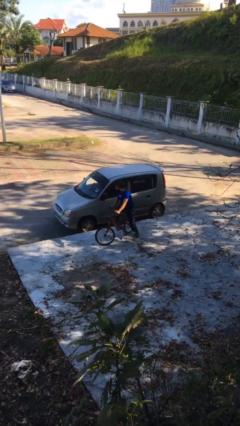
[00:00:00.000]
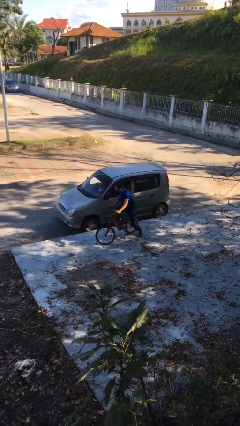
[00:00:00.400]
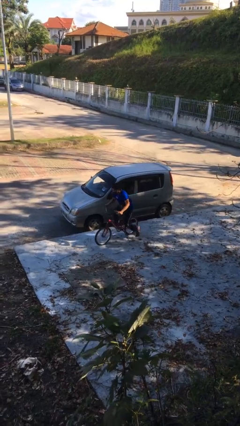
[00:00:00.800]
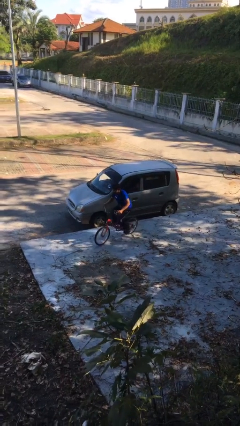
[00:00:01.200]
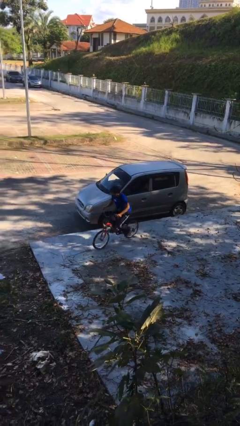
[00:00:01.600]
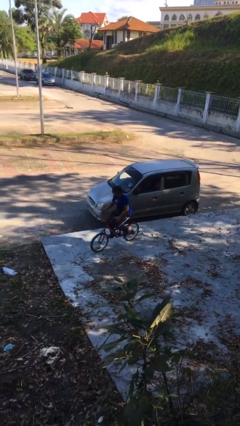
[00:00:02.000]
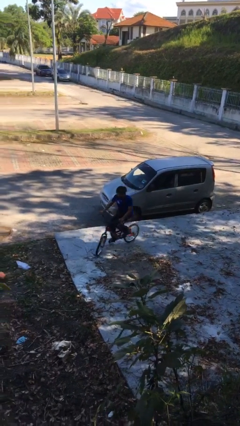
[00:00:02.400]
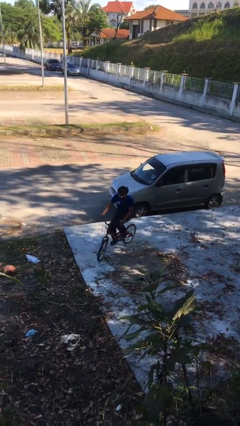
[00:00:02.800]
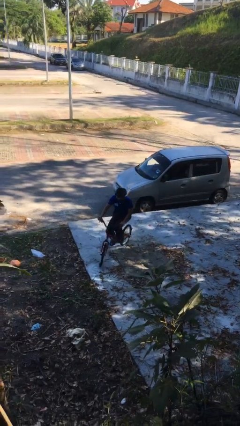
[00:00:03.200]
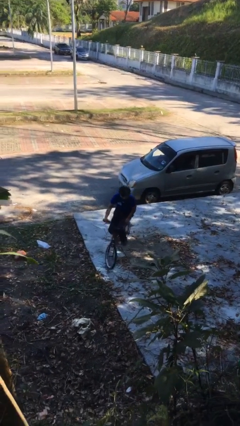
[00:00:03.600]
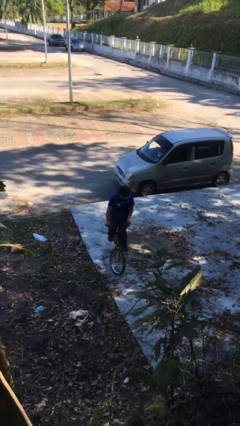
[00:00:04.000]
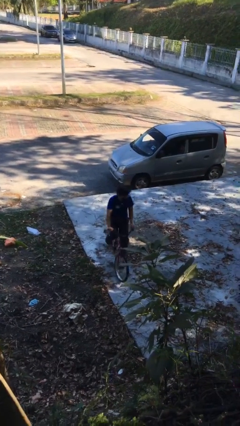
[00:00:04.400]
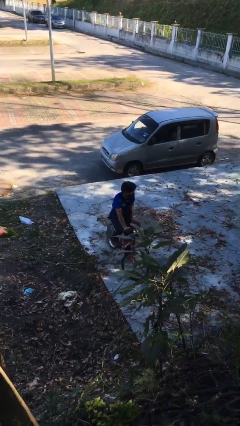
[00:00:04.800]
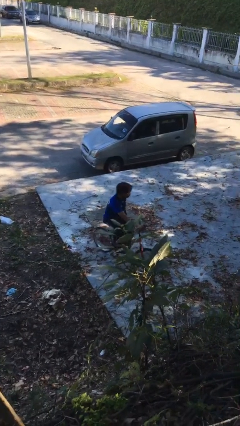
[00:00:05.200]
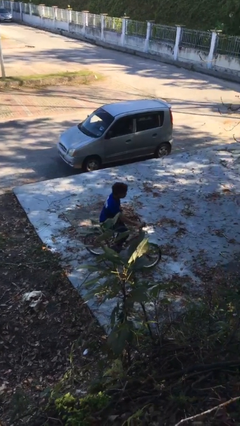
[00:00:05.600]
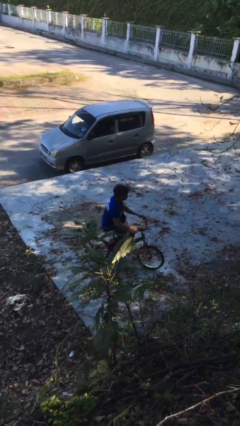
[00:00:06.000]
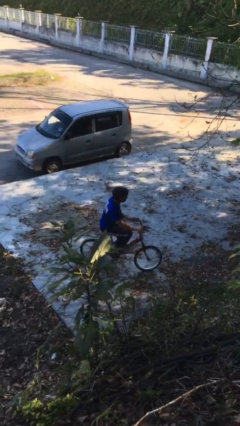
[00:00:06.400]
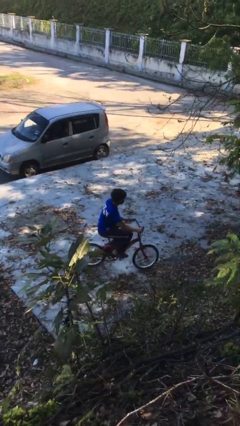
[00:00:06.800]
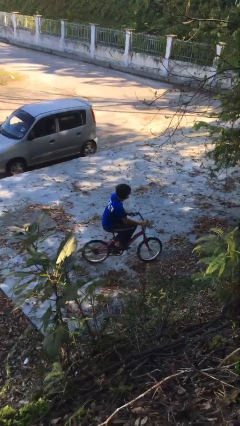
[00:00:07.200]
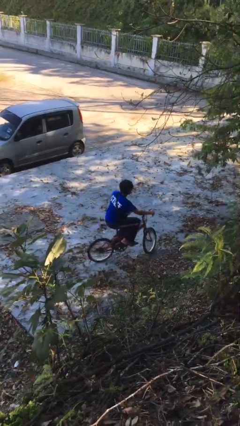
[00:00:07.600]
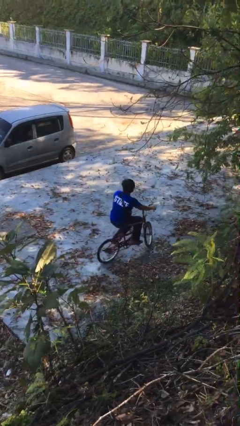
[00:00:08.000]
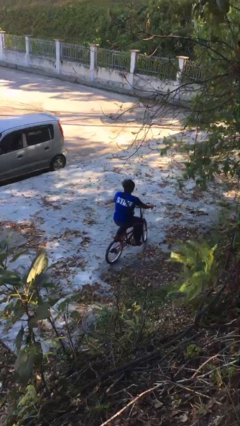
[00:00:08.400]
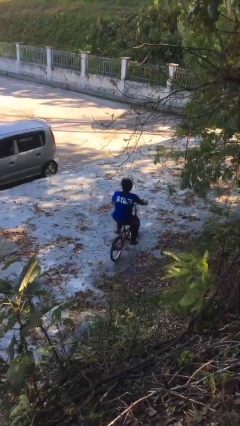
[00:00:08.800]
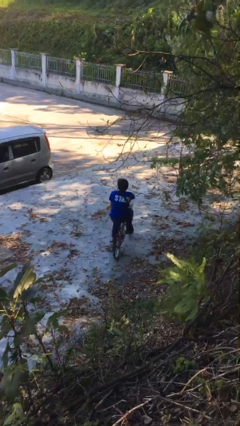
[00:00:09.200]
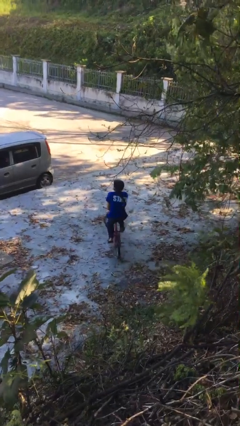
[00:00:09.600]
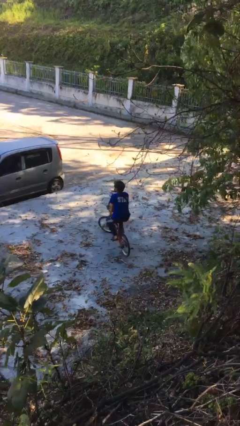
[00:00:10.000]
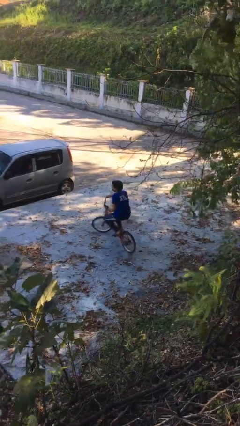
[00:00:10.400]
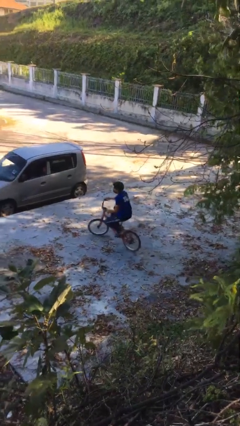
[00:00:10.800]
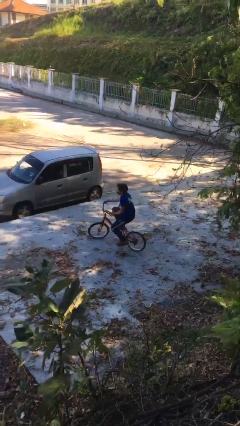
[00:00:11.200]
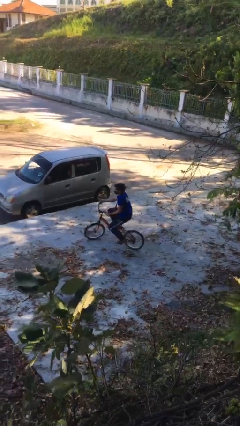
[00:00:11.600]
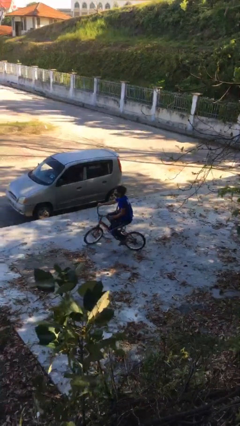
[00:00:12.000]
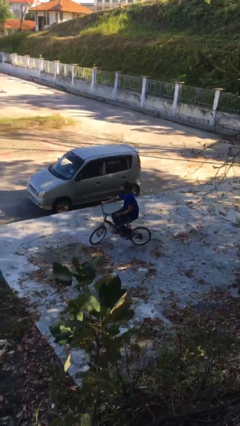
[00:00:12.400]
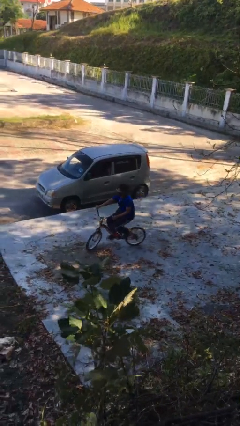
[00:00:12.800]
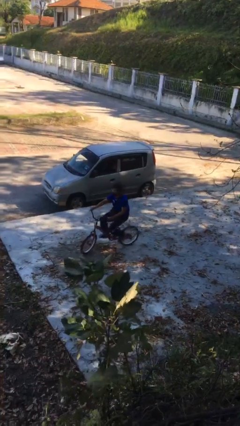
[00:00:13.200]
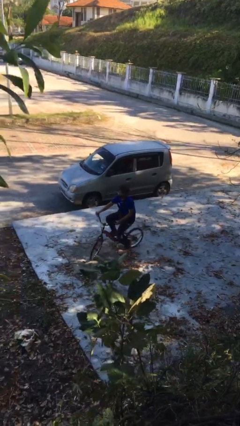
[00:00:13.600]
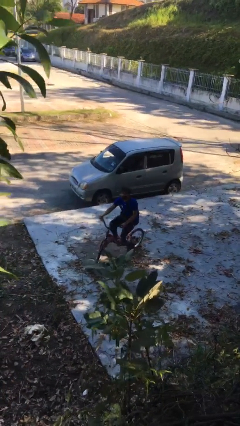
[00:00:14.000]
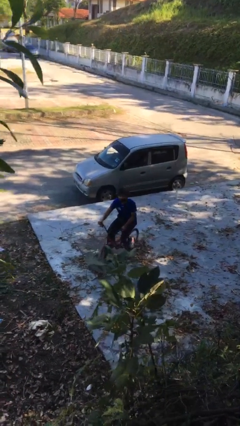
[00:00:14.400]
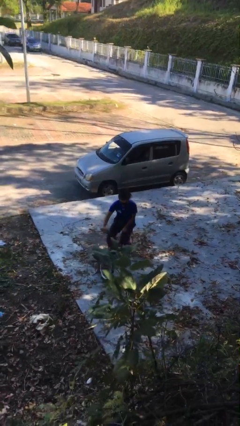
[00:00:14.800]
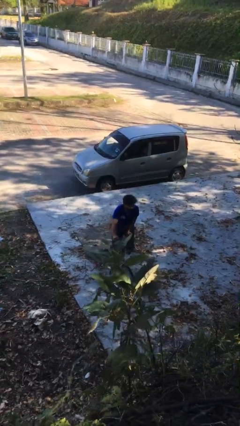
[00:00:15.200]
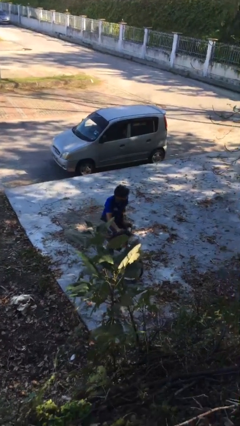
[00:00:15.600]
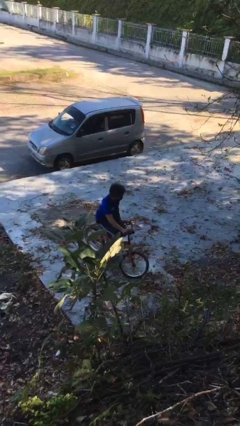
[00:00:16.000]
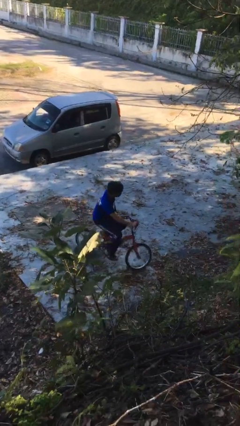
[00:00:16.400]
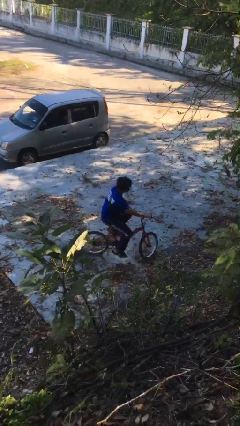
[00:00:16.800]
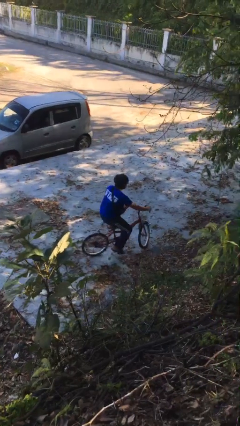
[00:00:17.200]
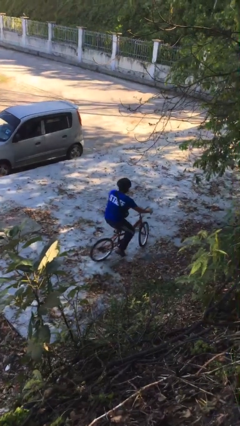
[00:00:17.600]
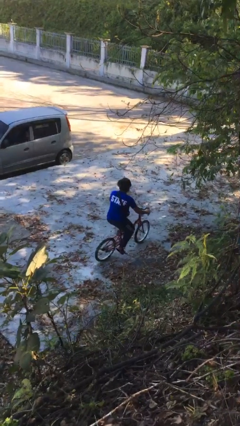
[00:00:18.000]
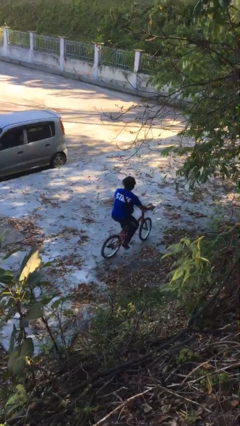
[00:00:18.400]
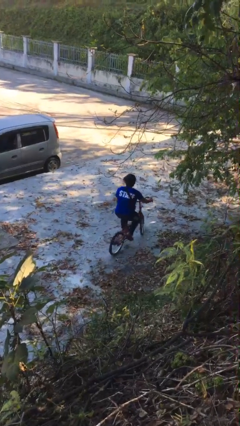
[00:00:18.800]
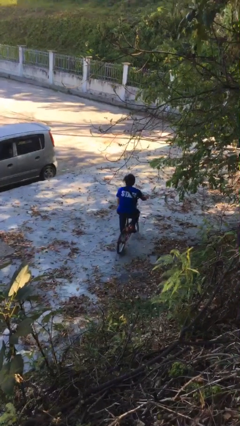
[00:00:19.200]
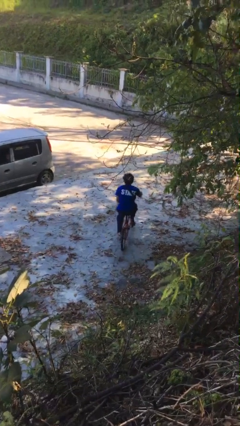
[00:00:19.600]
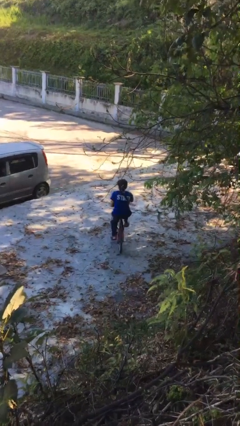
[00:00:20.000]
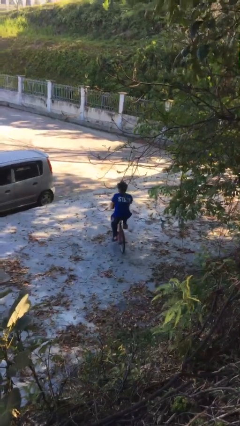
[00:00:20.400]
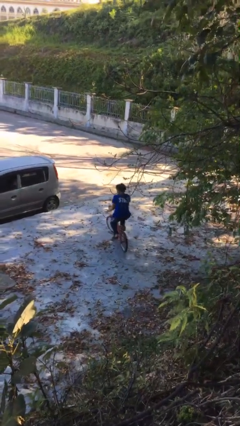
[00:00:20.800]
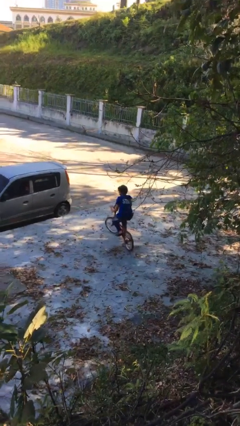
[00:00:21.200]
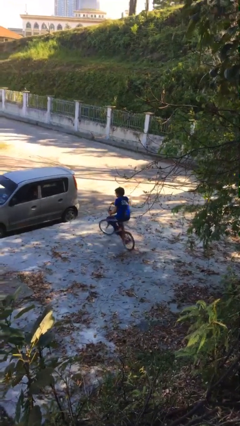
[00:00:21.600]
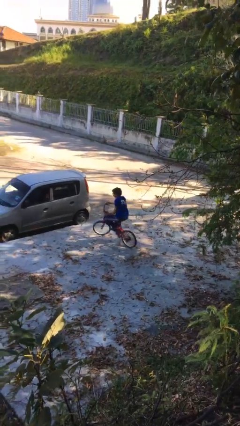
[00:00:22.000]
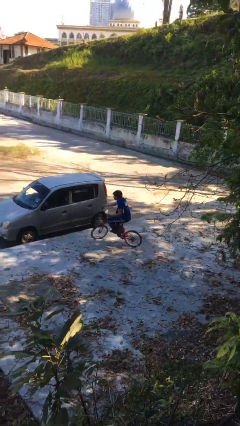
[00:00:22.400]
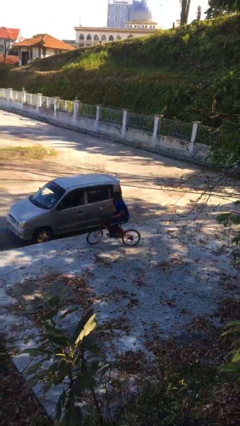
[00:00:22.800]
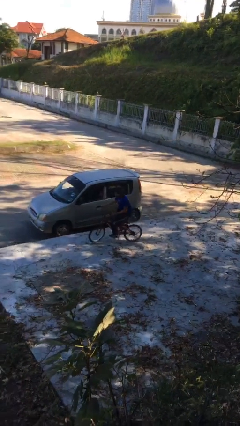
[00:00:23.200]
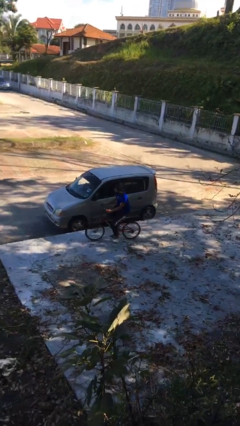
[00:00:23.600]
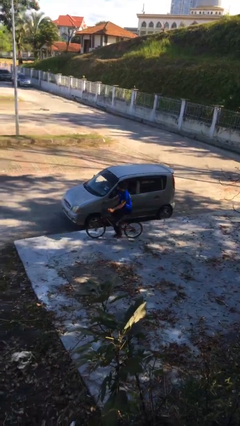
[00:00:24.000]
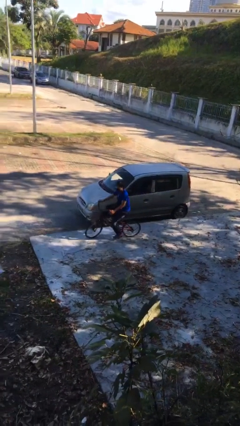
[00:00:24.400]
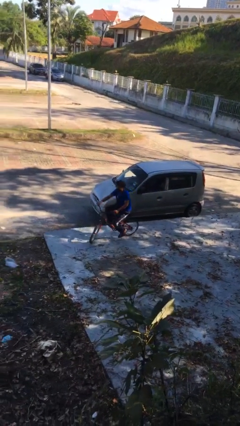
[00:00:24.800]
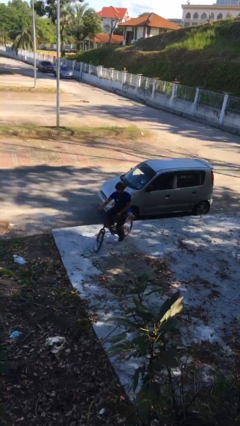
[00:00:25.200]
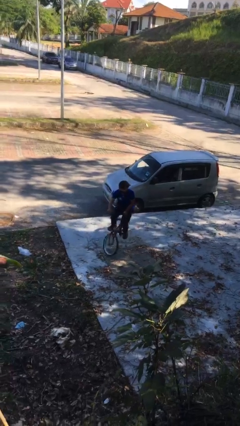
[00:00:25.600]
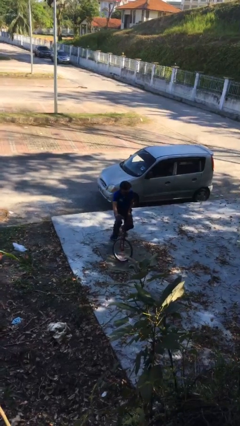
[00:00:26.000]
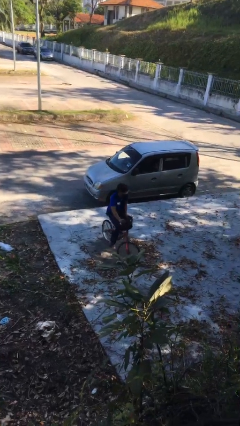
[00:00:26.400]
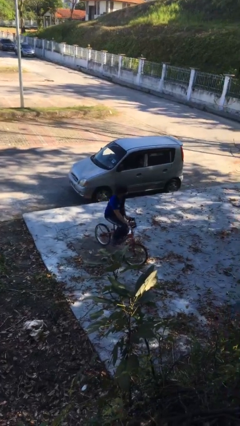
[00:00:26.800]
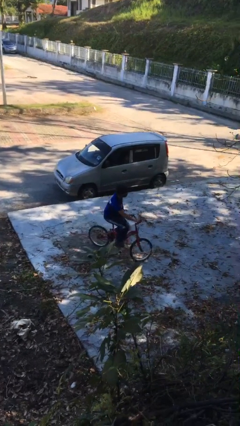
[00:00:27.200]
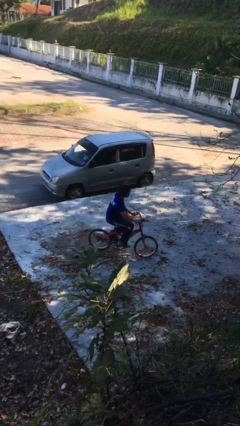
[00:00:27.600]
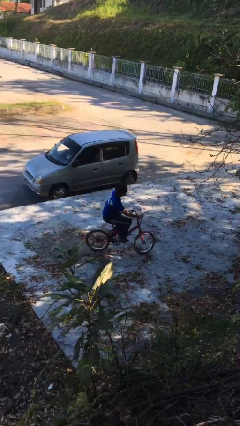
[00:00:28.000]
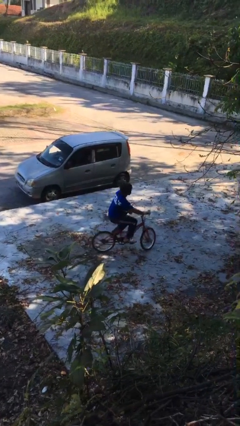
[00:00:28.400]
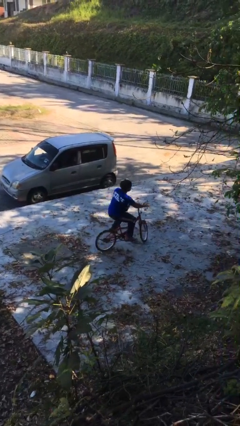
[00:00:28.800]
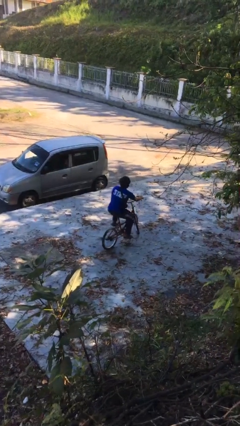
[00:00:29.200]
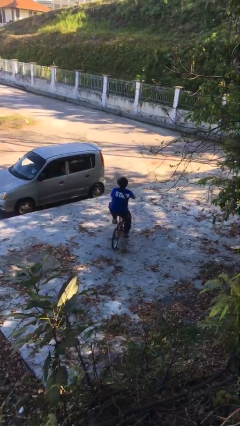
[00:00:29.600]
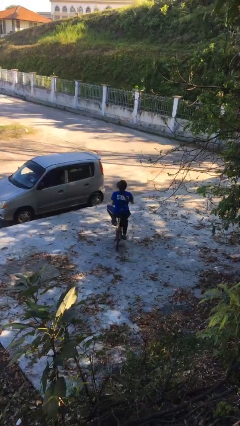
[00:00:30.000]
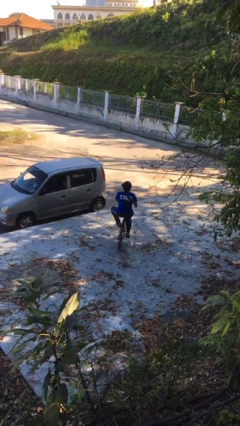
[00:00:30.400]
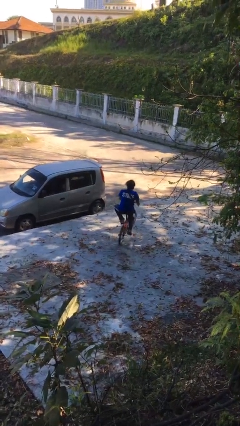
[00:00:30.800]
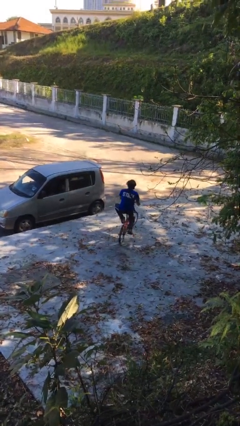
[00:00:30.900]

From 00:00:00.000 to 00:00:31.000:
person rides bicycle

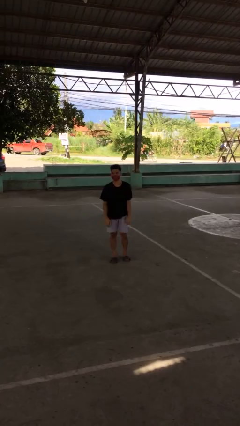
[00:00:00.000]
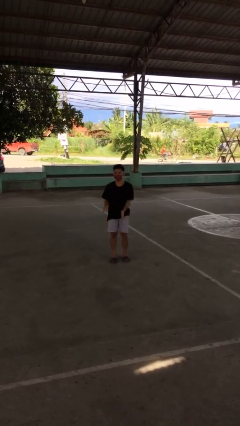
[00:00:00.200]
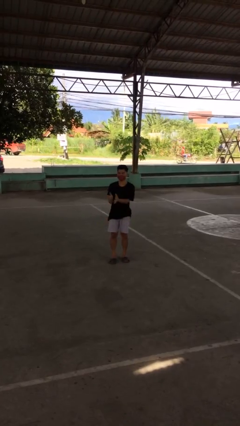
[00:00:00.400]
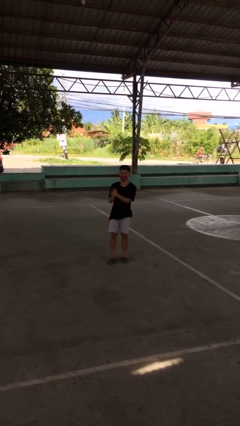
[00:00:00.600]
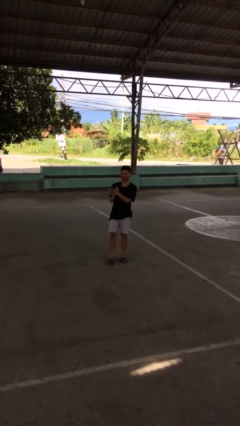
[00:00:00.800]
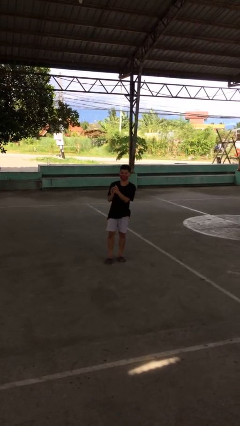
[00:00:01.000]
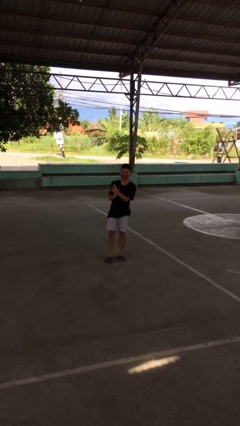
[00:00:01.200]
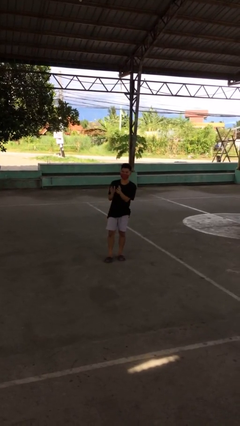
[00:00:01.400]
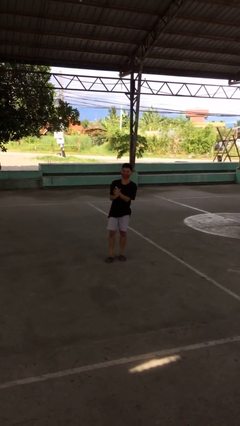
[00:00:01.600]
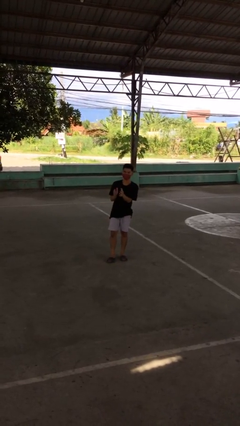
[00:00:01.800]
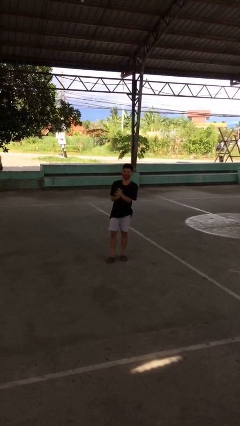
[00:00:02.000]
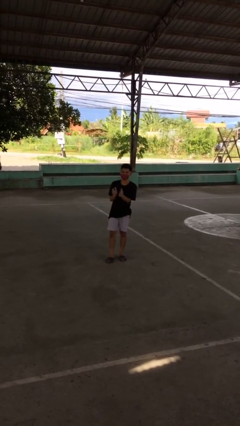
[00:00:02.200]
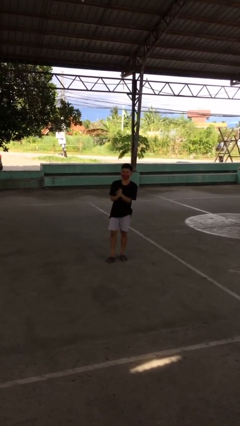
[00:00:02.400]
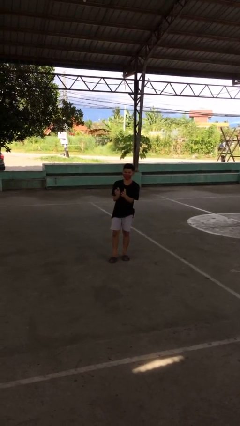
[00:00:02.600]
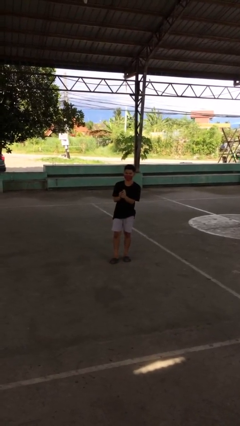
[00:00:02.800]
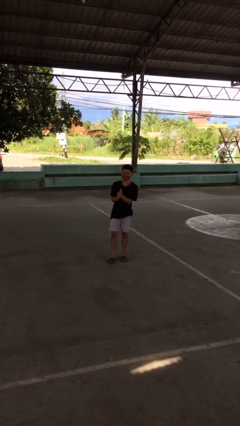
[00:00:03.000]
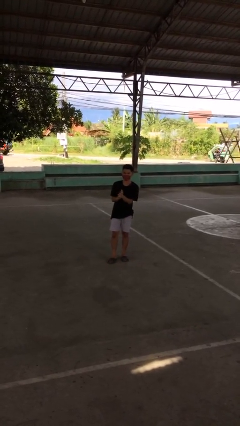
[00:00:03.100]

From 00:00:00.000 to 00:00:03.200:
person claps hands
